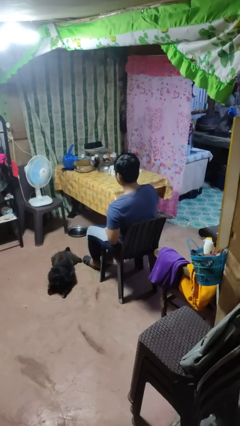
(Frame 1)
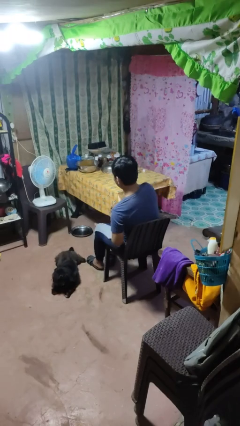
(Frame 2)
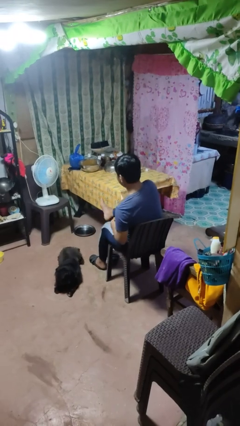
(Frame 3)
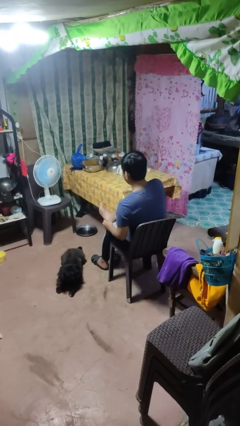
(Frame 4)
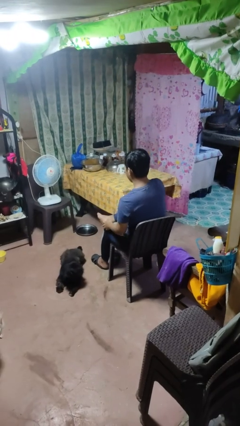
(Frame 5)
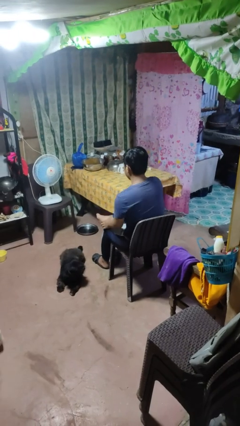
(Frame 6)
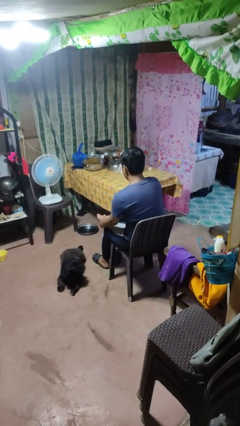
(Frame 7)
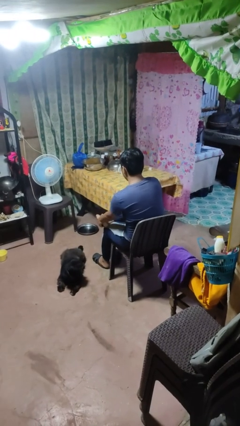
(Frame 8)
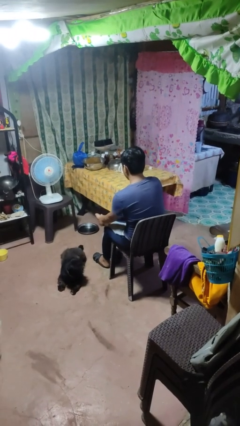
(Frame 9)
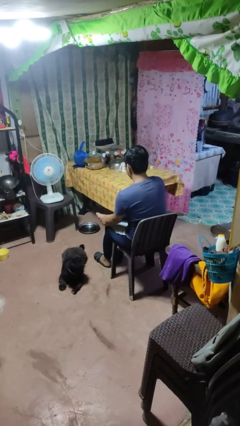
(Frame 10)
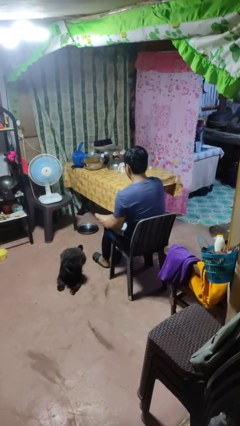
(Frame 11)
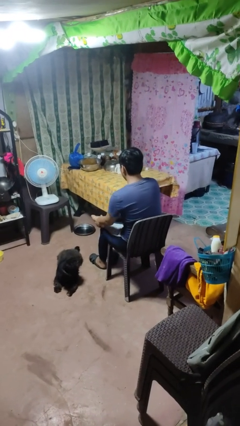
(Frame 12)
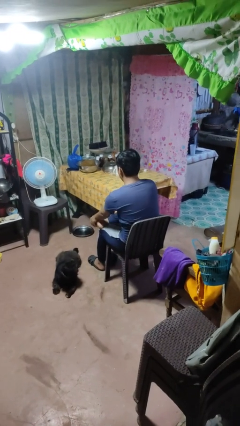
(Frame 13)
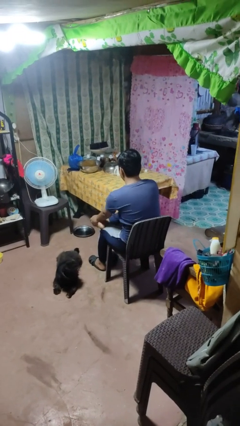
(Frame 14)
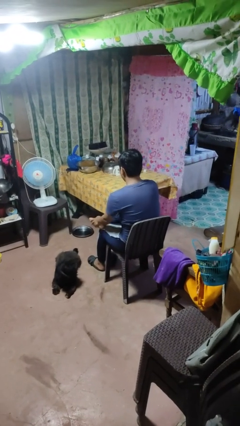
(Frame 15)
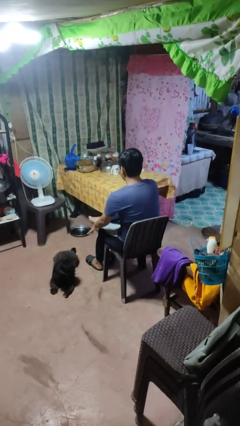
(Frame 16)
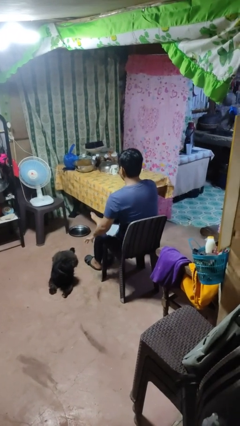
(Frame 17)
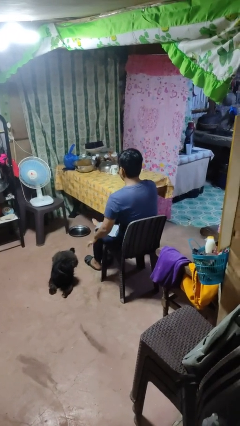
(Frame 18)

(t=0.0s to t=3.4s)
person rubs foot

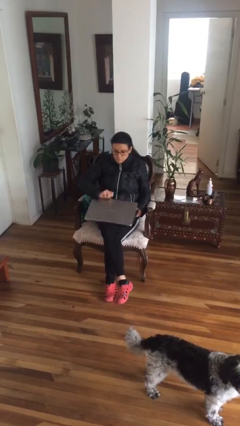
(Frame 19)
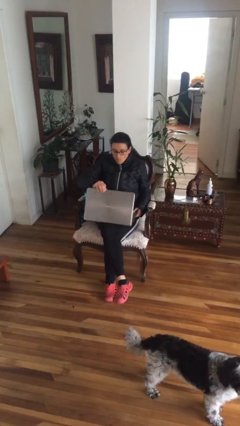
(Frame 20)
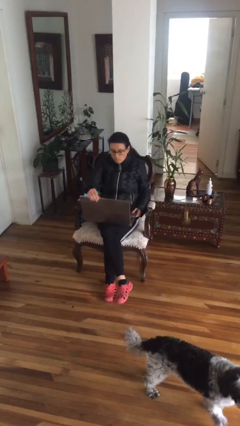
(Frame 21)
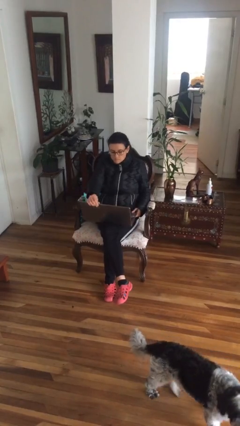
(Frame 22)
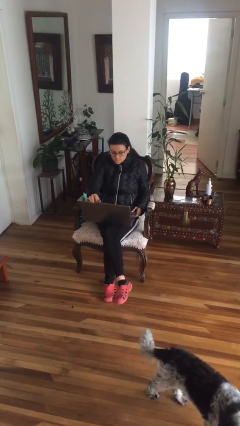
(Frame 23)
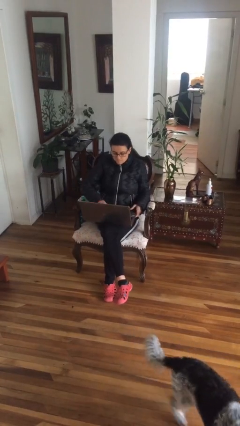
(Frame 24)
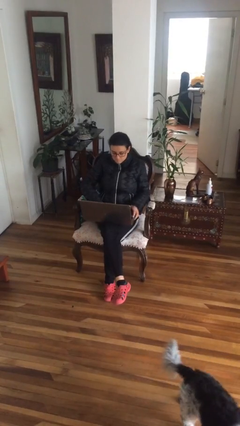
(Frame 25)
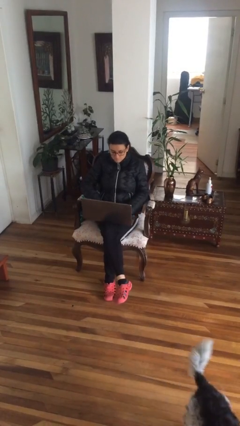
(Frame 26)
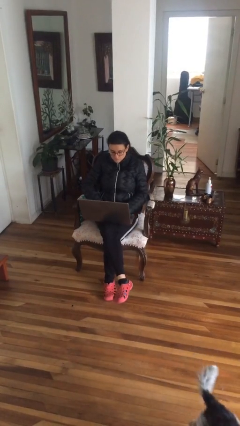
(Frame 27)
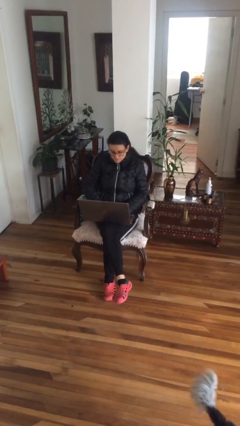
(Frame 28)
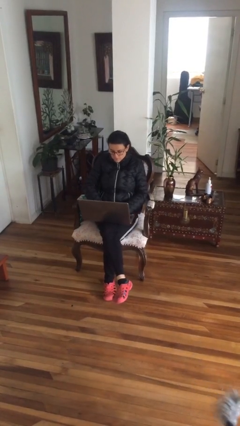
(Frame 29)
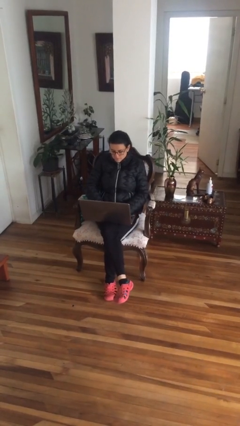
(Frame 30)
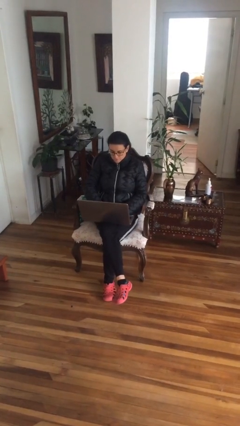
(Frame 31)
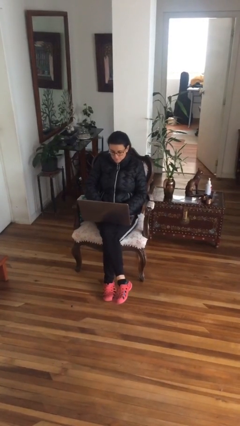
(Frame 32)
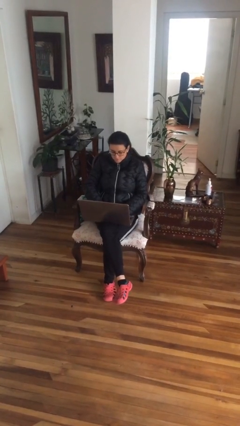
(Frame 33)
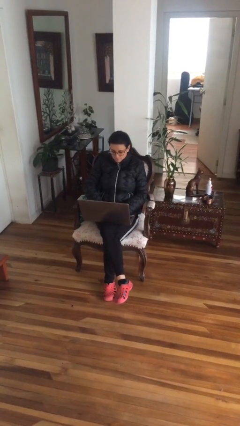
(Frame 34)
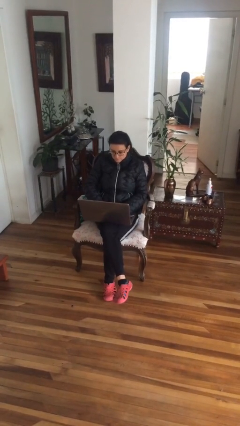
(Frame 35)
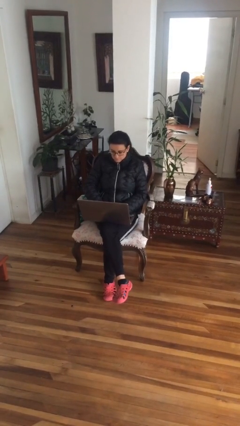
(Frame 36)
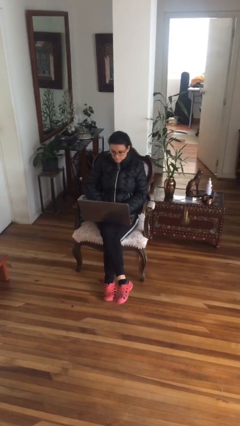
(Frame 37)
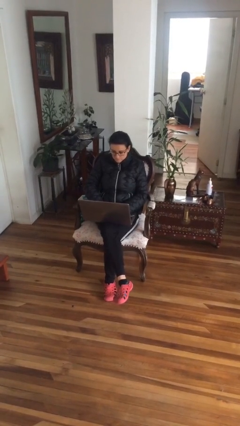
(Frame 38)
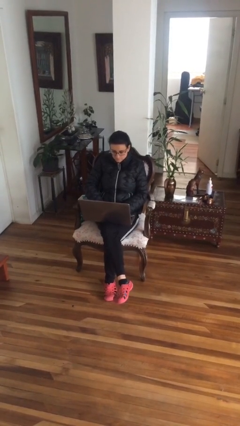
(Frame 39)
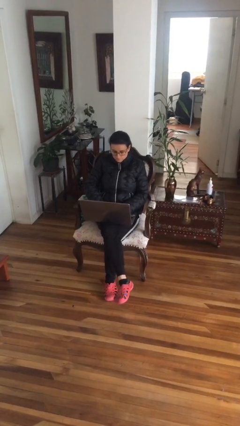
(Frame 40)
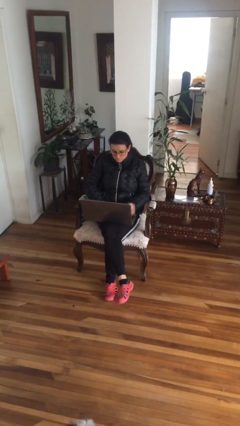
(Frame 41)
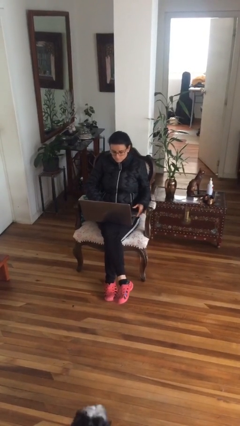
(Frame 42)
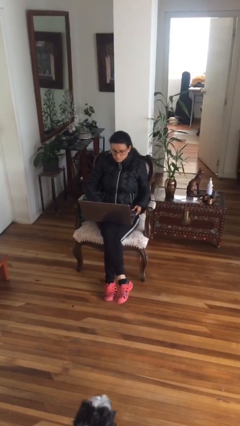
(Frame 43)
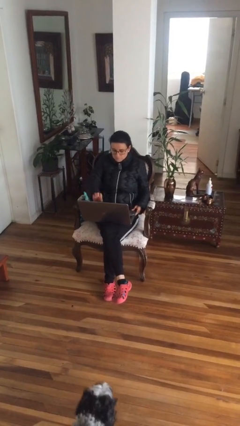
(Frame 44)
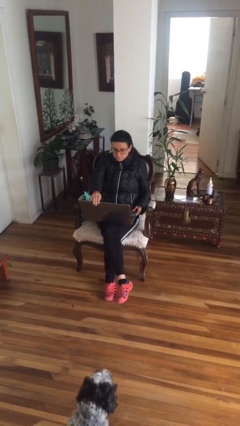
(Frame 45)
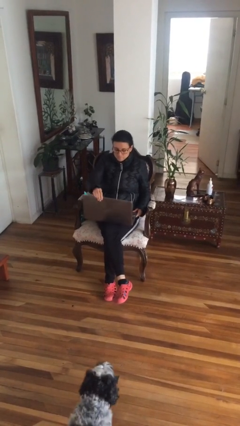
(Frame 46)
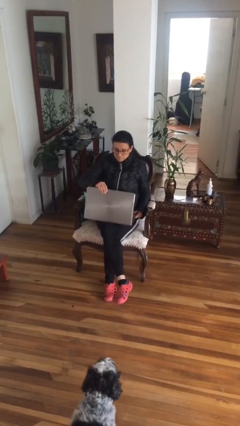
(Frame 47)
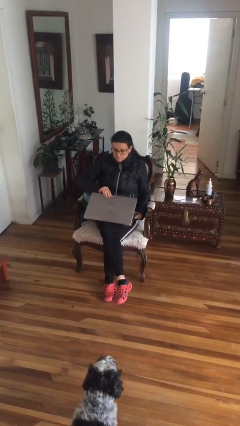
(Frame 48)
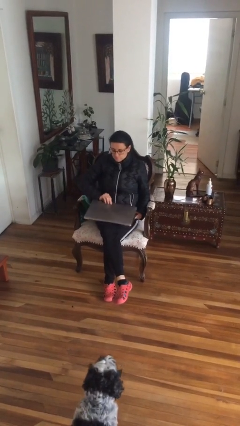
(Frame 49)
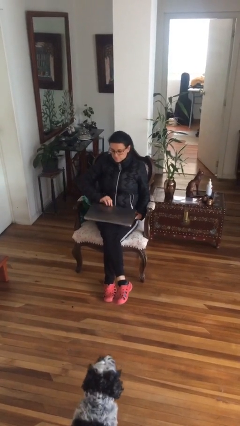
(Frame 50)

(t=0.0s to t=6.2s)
person interacts with laptop

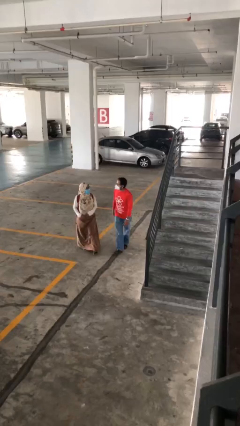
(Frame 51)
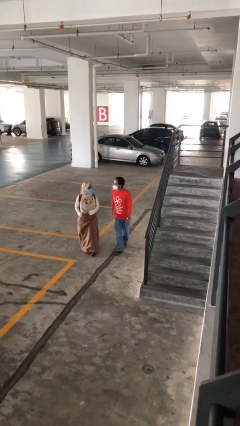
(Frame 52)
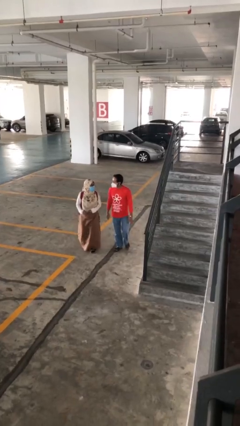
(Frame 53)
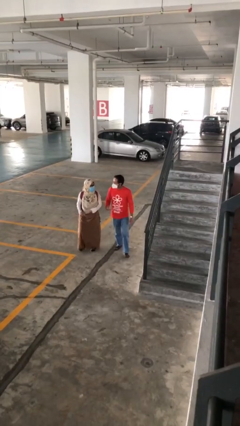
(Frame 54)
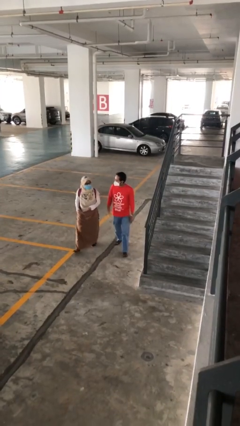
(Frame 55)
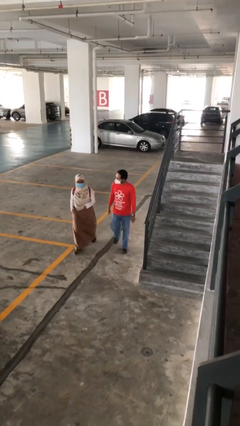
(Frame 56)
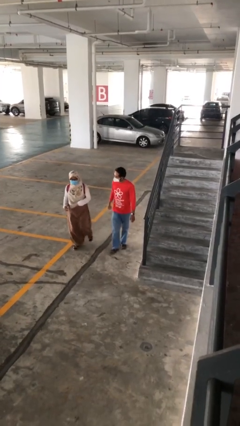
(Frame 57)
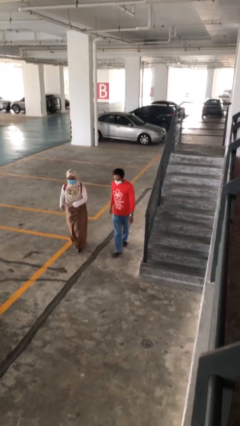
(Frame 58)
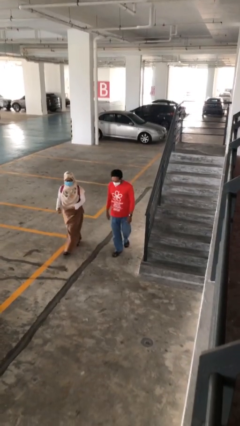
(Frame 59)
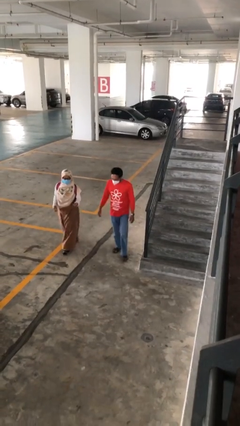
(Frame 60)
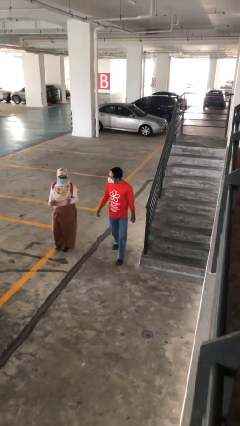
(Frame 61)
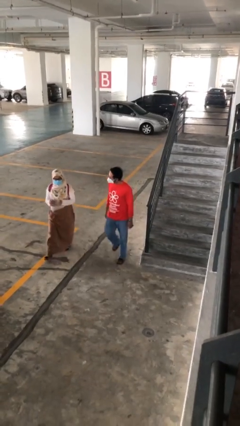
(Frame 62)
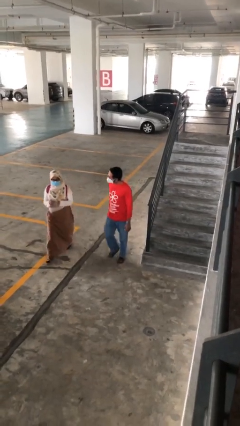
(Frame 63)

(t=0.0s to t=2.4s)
person talks to person

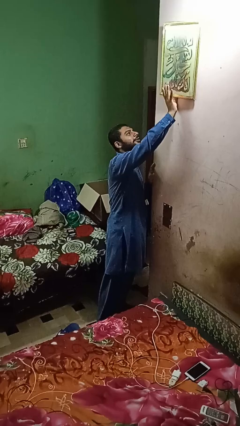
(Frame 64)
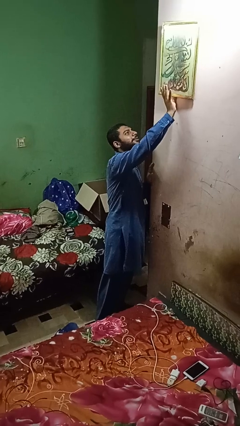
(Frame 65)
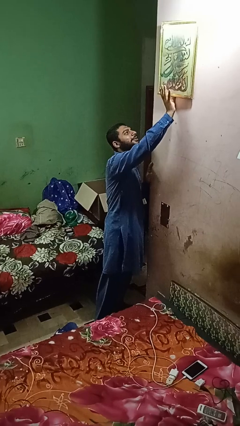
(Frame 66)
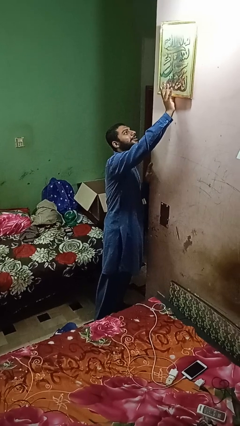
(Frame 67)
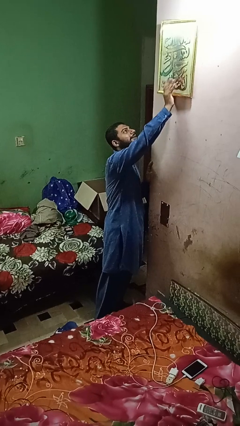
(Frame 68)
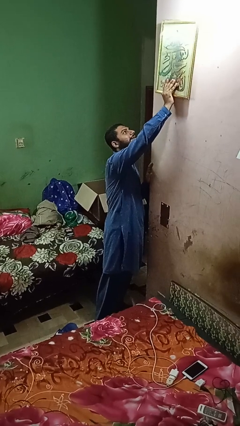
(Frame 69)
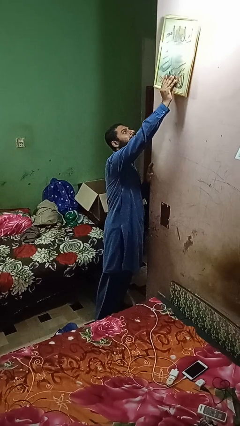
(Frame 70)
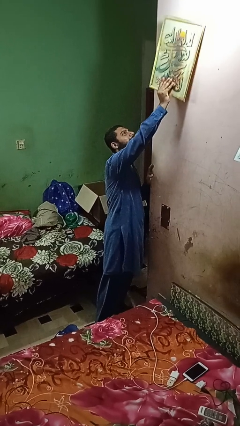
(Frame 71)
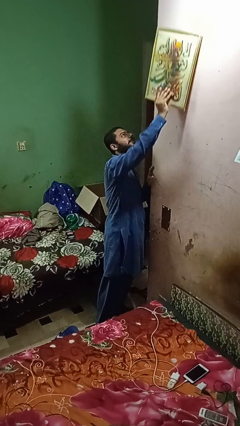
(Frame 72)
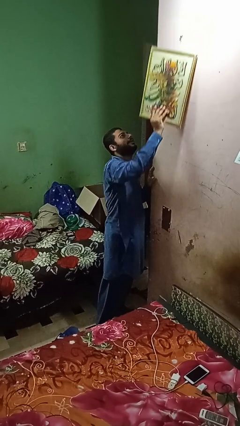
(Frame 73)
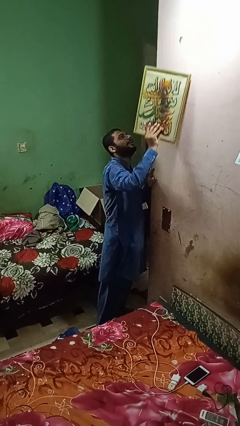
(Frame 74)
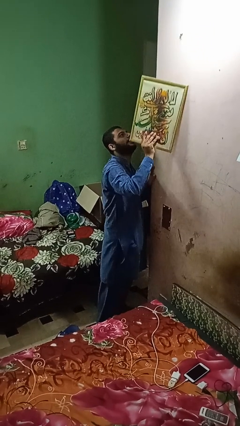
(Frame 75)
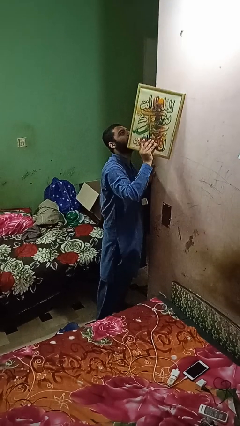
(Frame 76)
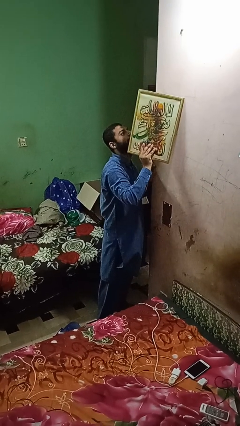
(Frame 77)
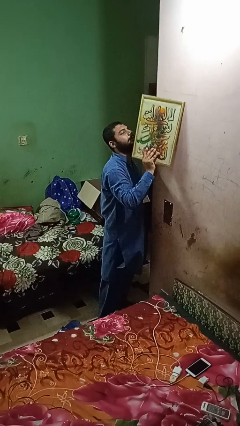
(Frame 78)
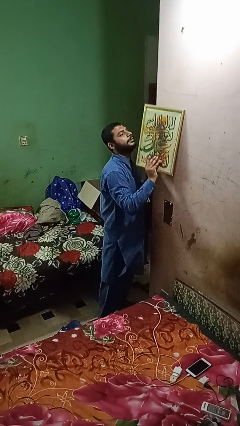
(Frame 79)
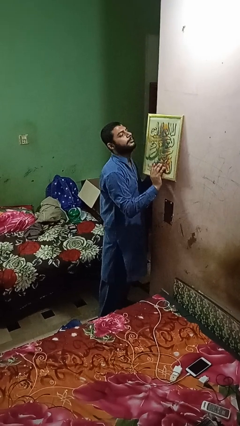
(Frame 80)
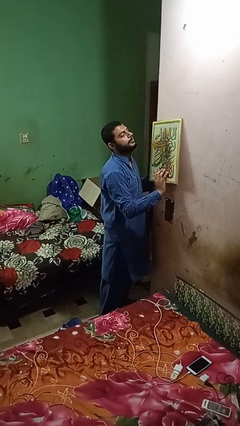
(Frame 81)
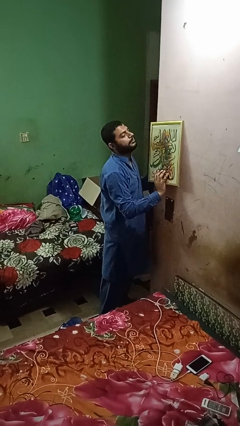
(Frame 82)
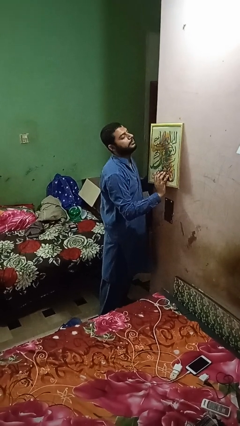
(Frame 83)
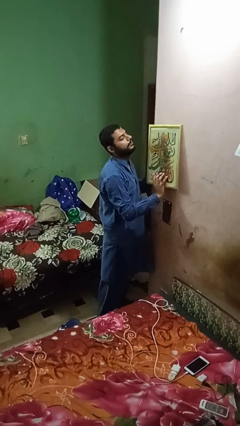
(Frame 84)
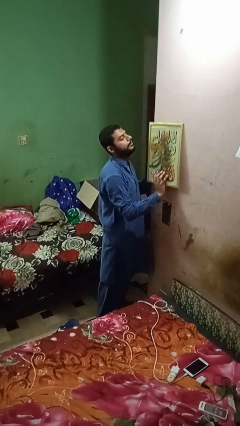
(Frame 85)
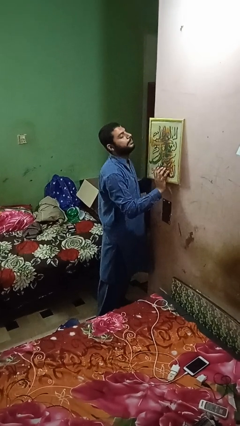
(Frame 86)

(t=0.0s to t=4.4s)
person takes down picture frame

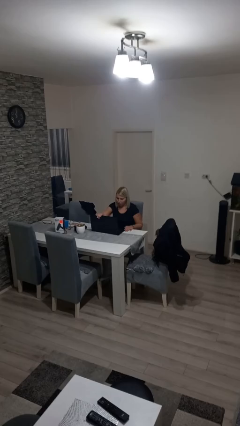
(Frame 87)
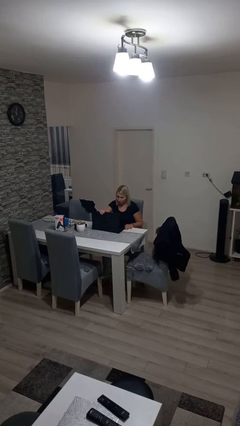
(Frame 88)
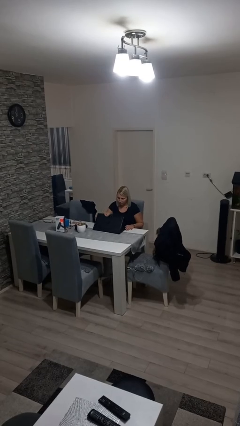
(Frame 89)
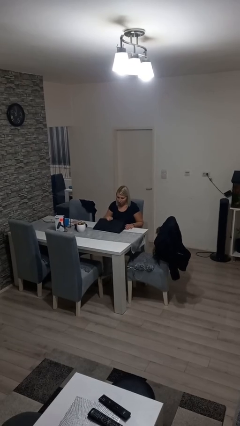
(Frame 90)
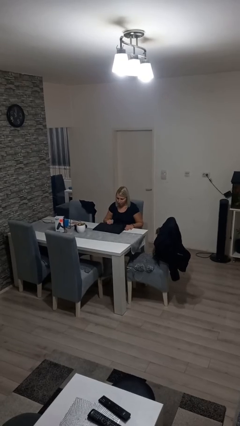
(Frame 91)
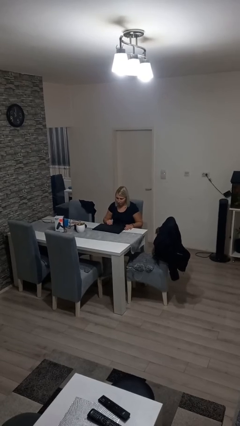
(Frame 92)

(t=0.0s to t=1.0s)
person closes laptop
